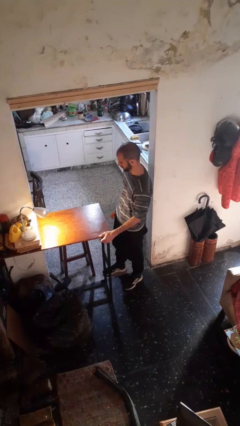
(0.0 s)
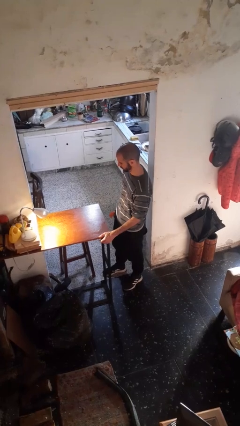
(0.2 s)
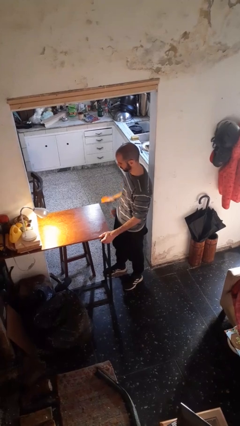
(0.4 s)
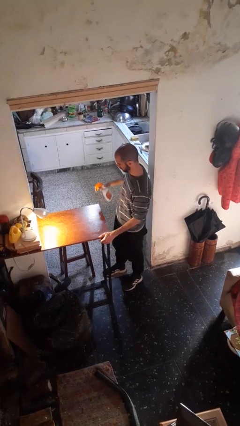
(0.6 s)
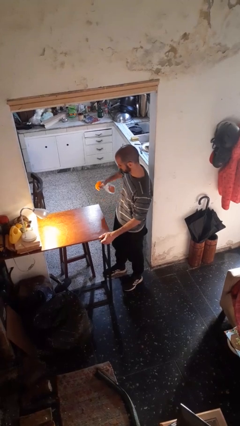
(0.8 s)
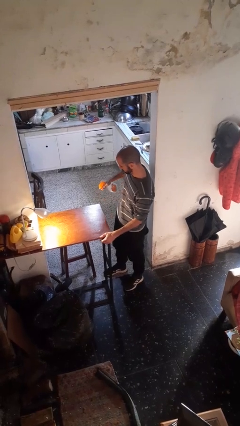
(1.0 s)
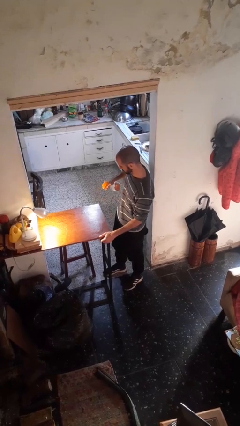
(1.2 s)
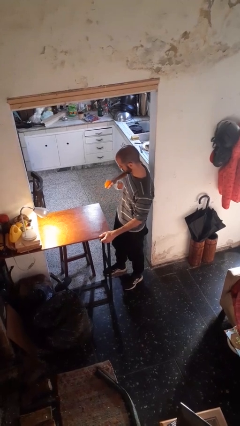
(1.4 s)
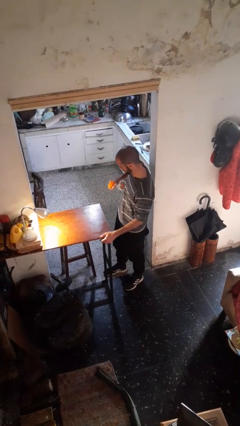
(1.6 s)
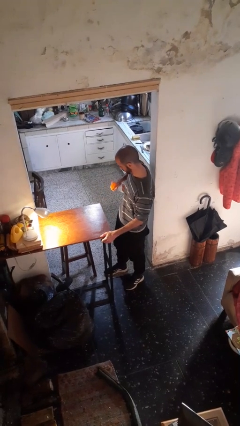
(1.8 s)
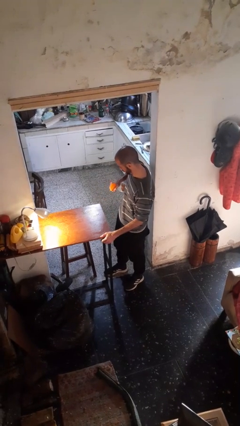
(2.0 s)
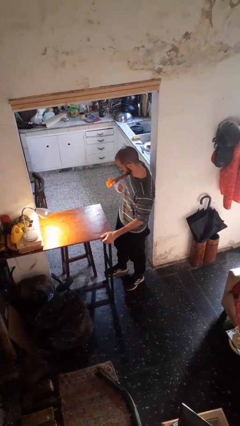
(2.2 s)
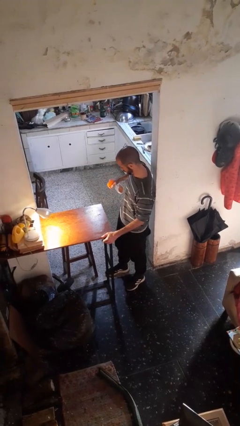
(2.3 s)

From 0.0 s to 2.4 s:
person sprays from bottle

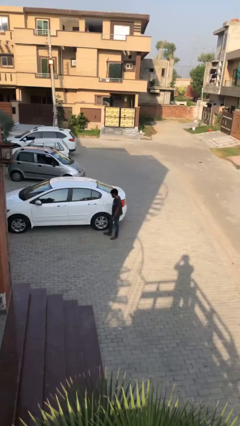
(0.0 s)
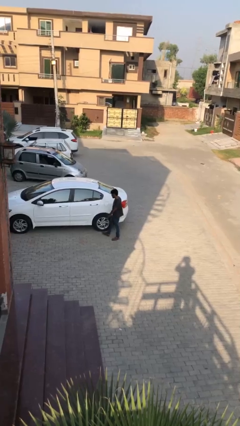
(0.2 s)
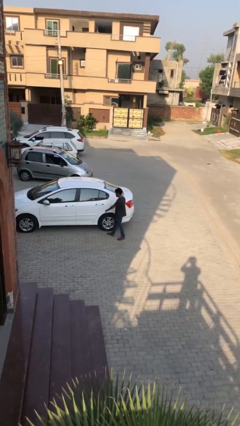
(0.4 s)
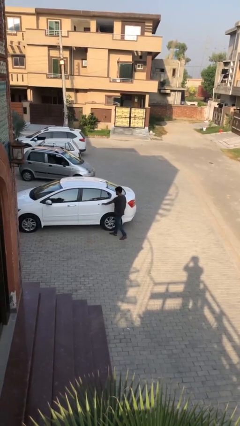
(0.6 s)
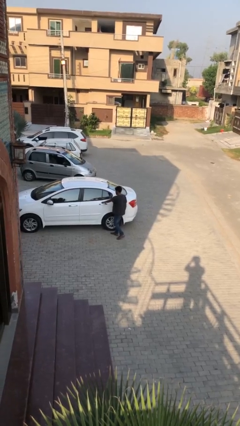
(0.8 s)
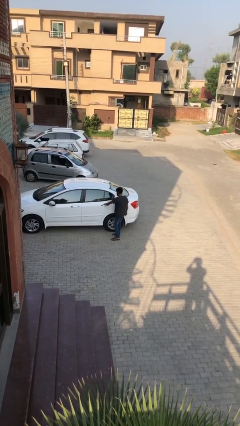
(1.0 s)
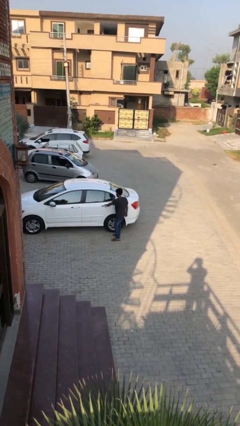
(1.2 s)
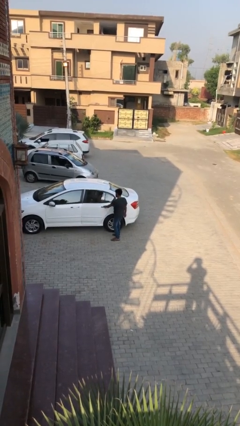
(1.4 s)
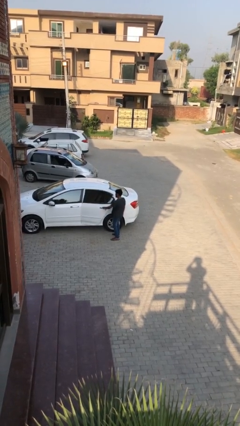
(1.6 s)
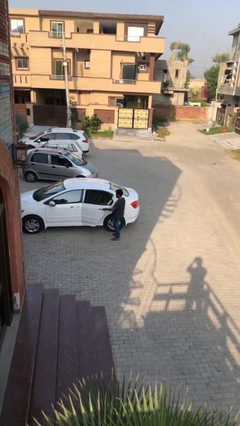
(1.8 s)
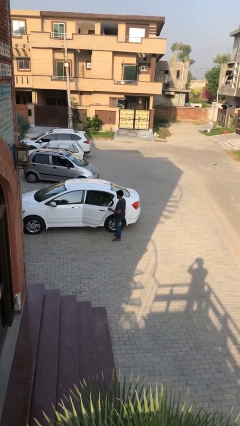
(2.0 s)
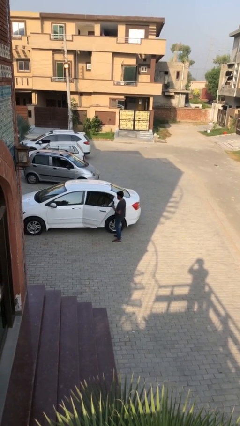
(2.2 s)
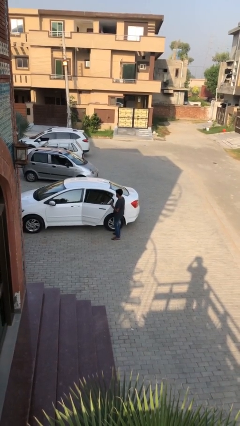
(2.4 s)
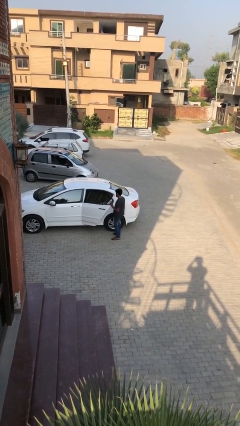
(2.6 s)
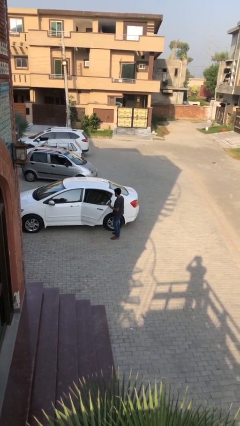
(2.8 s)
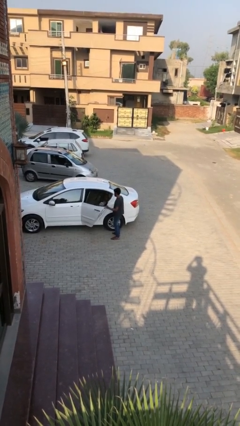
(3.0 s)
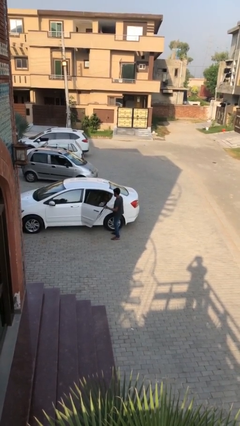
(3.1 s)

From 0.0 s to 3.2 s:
person opens car door

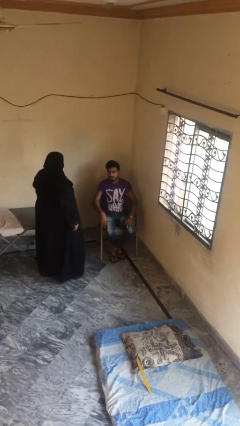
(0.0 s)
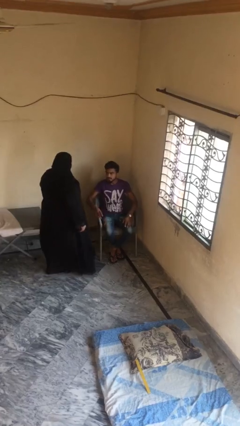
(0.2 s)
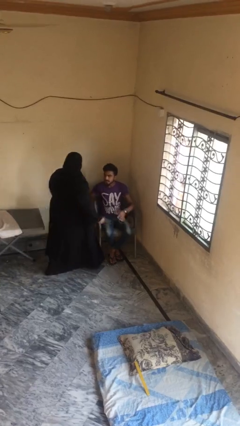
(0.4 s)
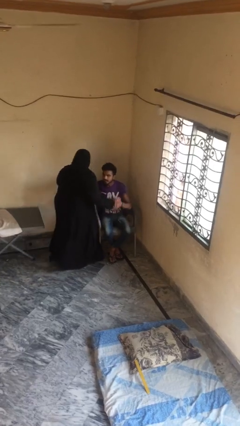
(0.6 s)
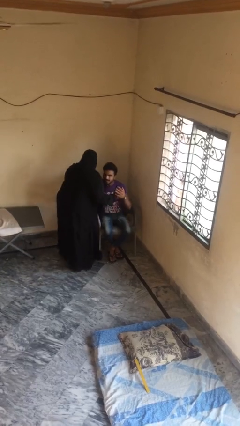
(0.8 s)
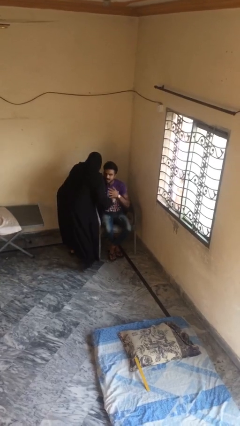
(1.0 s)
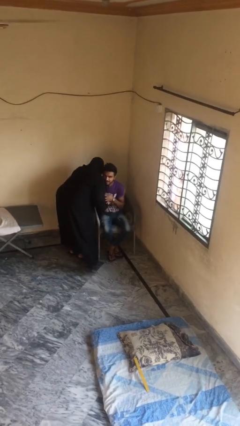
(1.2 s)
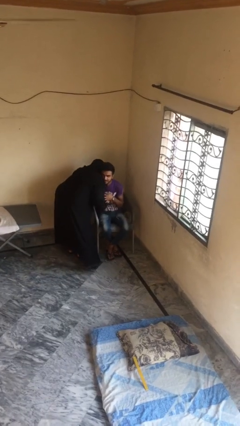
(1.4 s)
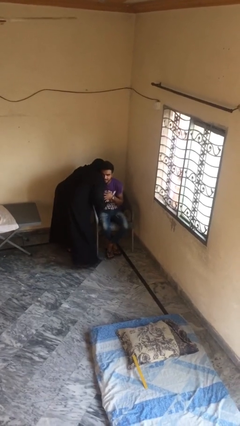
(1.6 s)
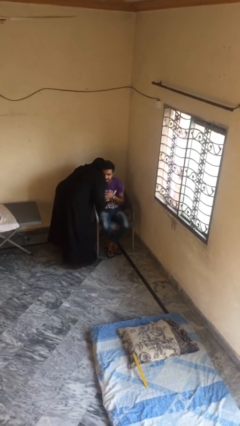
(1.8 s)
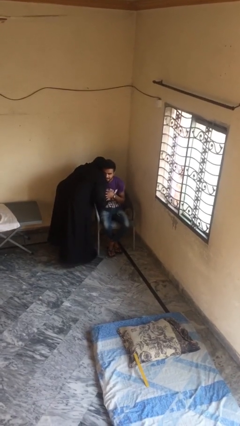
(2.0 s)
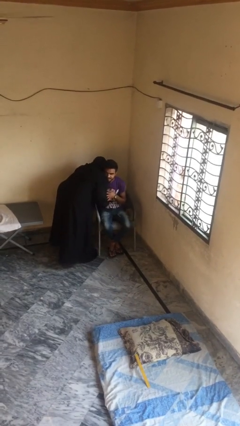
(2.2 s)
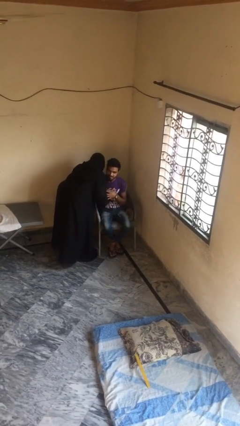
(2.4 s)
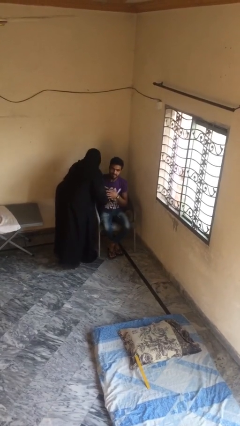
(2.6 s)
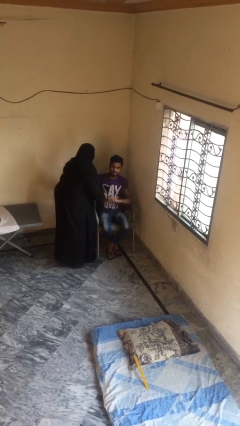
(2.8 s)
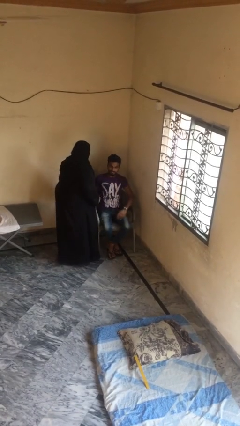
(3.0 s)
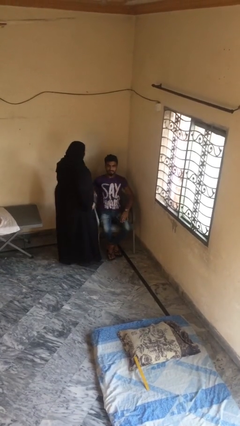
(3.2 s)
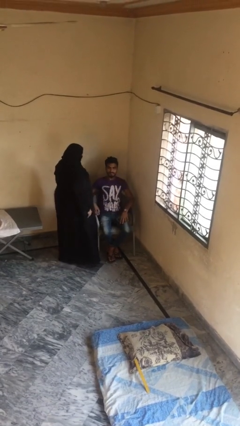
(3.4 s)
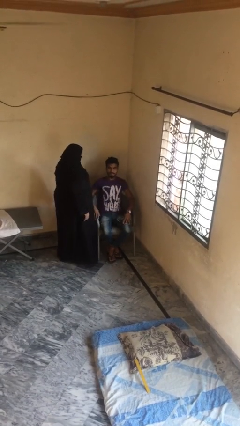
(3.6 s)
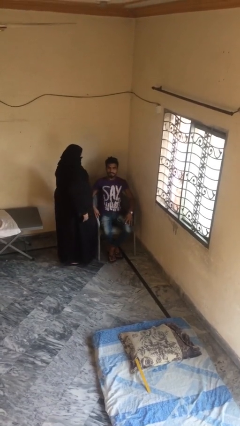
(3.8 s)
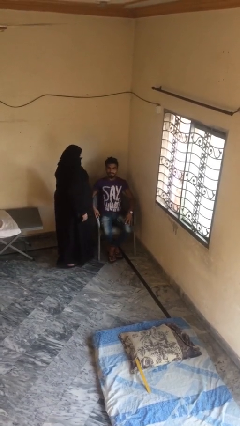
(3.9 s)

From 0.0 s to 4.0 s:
person embraces person

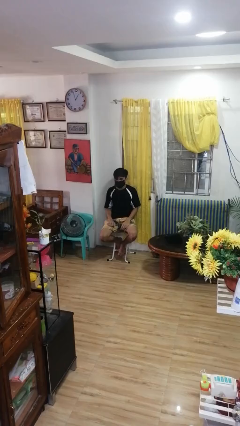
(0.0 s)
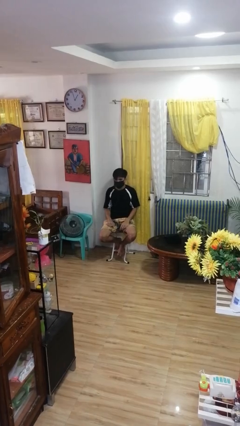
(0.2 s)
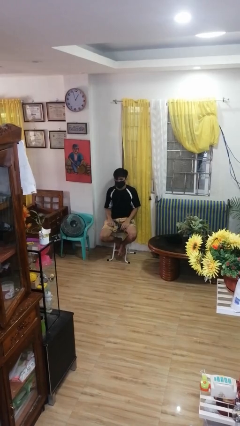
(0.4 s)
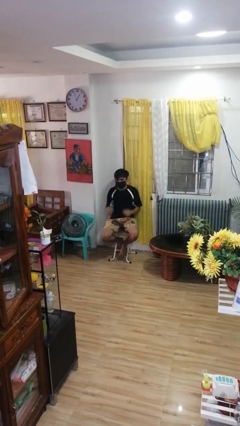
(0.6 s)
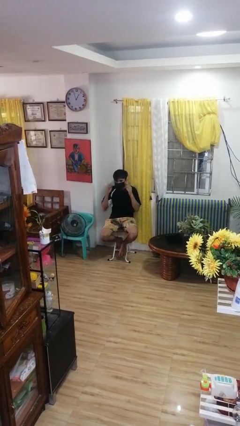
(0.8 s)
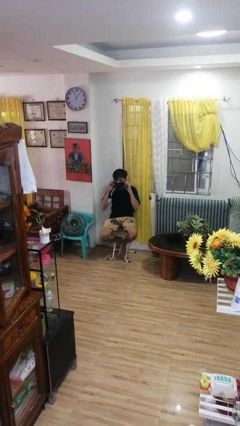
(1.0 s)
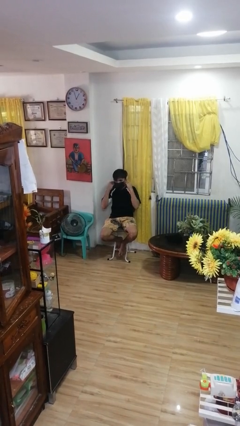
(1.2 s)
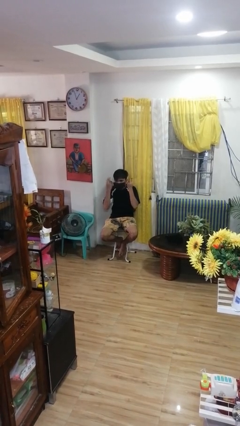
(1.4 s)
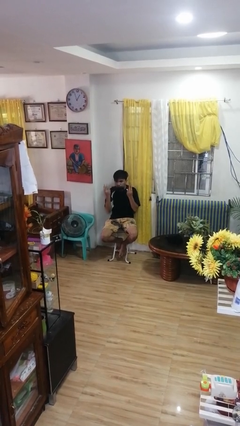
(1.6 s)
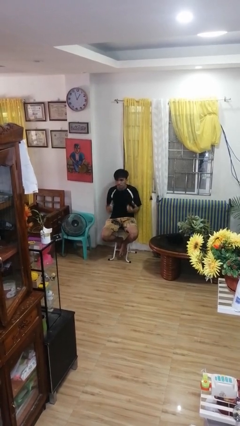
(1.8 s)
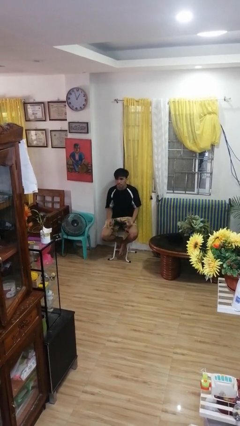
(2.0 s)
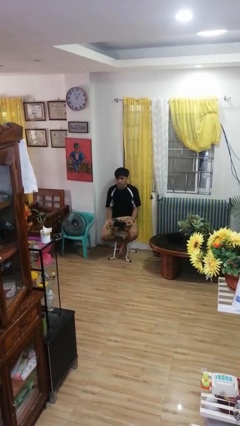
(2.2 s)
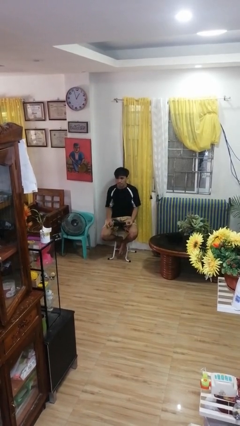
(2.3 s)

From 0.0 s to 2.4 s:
person takes off facemask

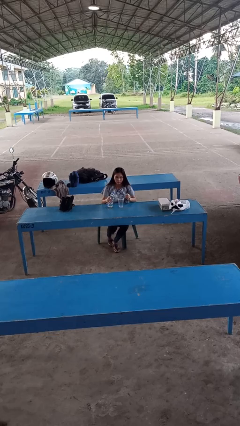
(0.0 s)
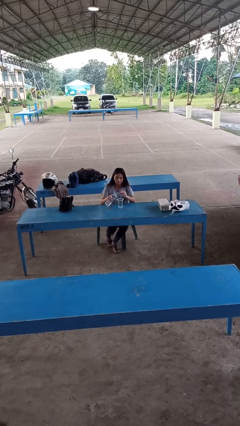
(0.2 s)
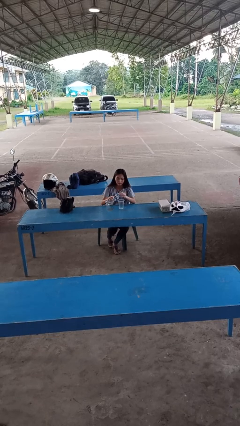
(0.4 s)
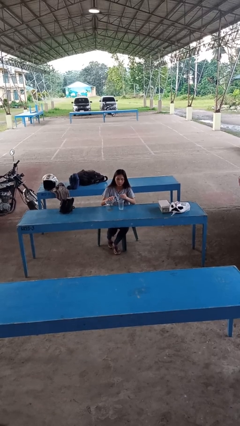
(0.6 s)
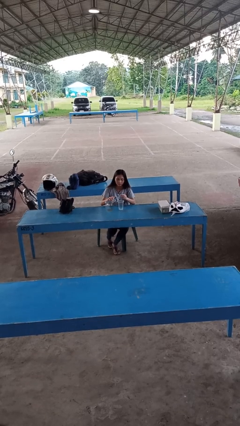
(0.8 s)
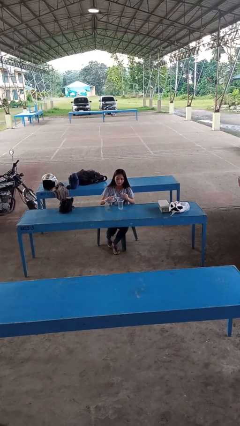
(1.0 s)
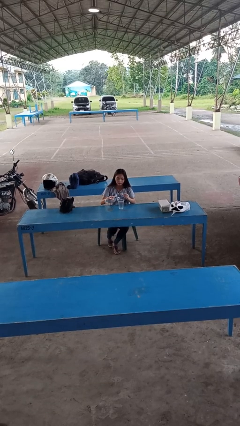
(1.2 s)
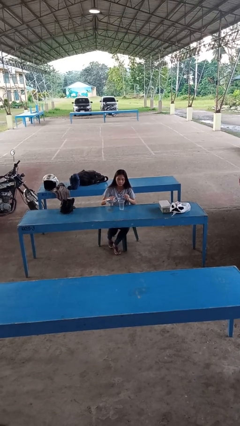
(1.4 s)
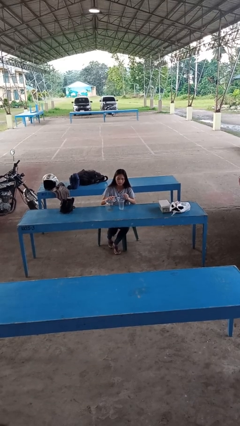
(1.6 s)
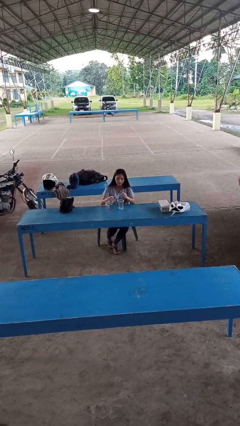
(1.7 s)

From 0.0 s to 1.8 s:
person pours liquid into cup

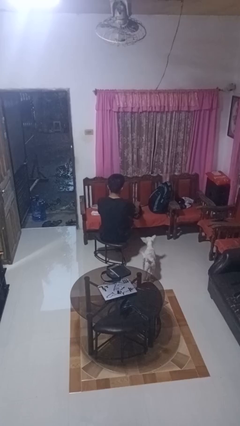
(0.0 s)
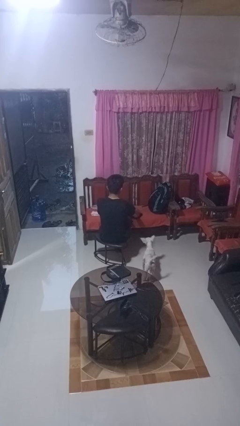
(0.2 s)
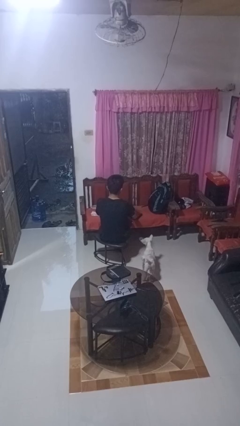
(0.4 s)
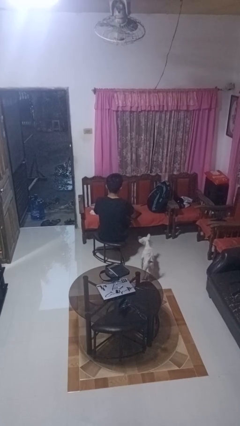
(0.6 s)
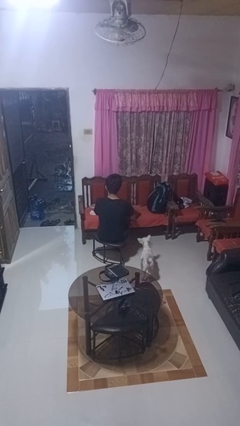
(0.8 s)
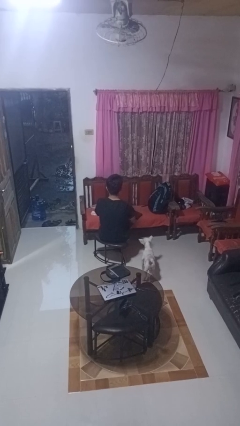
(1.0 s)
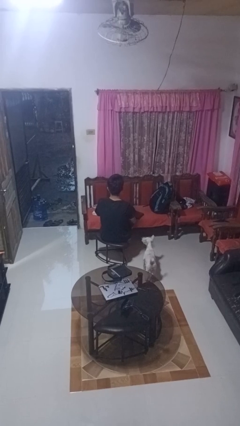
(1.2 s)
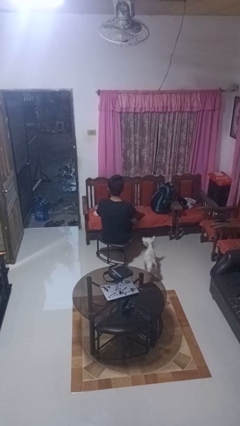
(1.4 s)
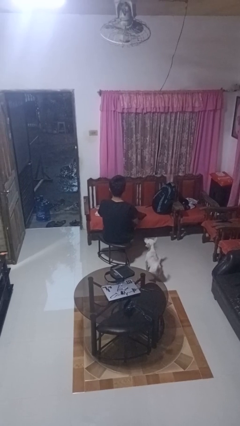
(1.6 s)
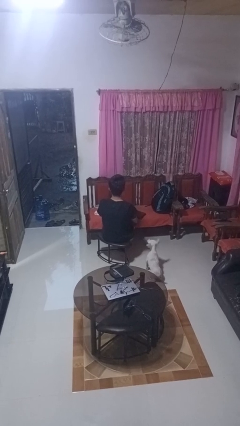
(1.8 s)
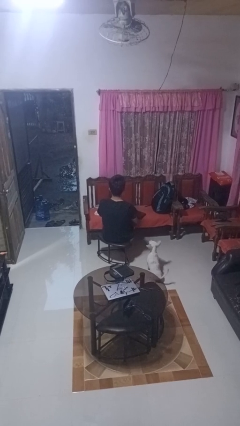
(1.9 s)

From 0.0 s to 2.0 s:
person closes laptop

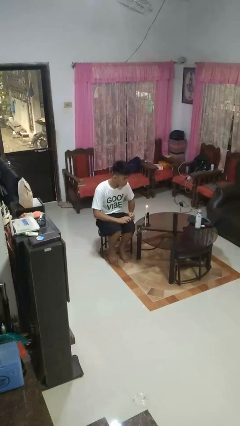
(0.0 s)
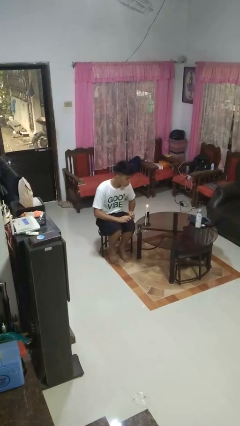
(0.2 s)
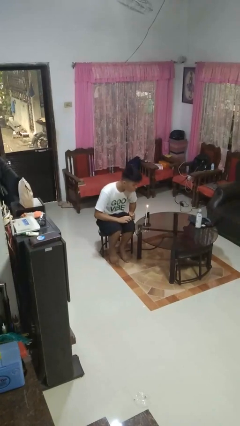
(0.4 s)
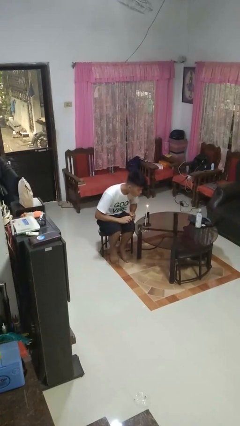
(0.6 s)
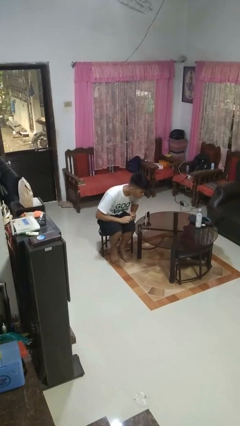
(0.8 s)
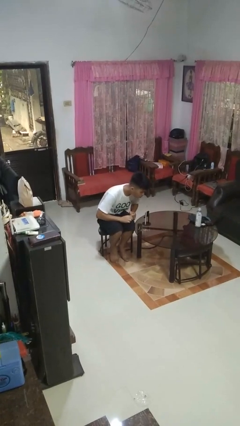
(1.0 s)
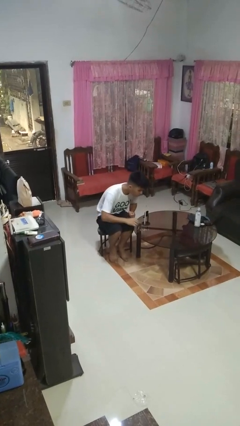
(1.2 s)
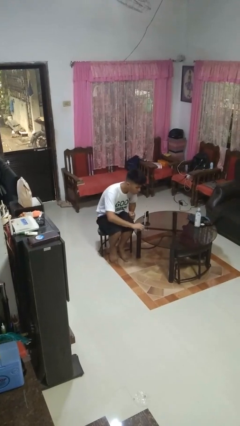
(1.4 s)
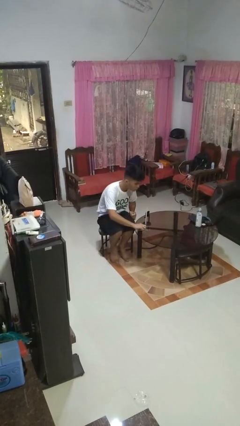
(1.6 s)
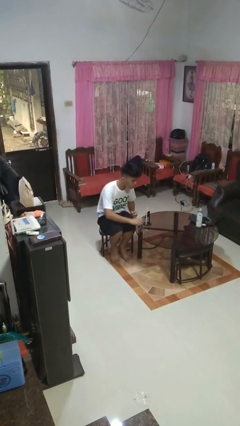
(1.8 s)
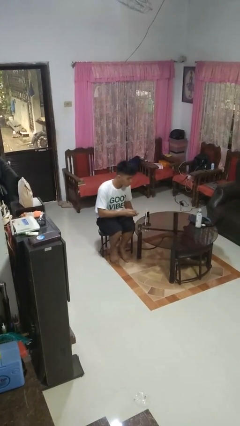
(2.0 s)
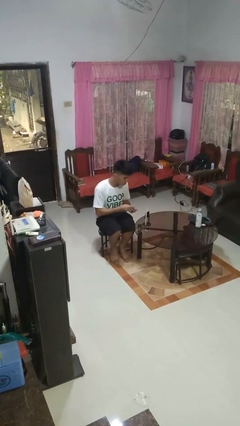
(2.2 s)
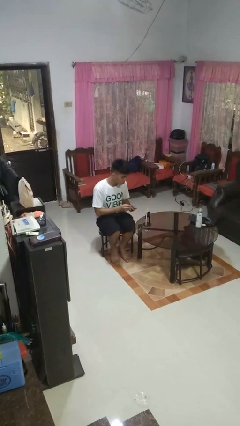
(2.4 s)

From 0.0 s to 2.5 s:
person extinguishes candle
